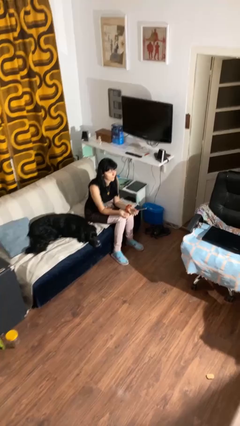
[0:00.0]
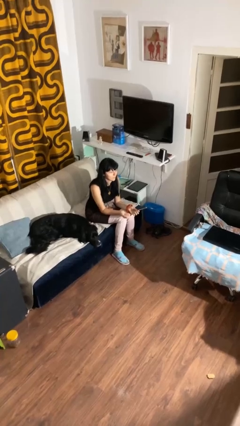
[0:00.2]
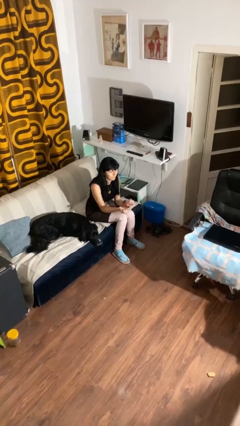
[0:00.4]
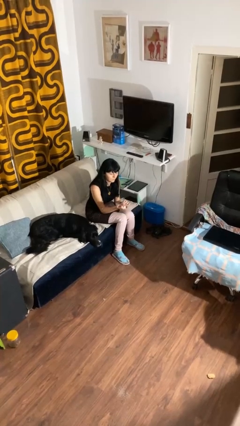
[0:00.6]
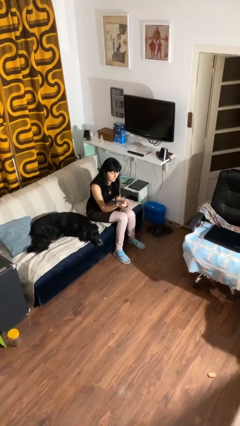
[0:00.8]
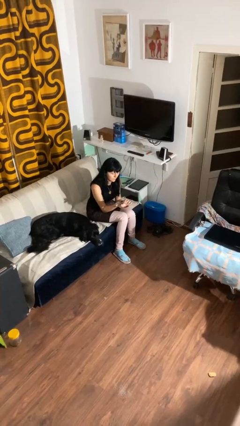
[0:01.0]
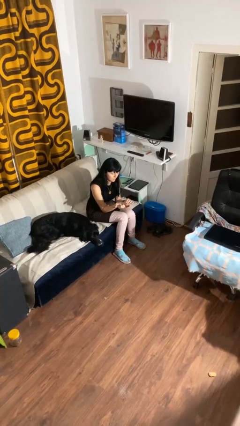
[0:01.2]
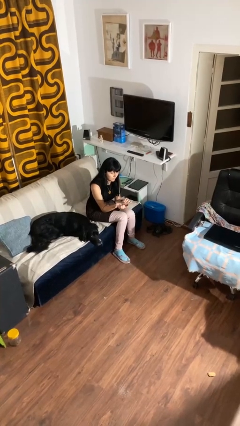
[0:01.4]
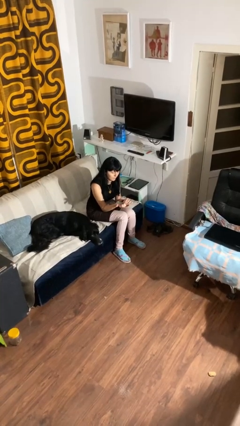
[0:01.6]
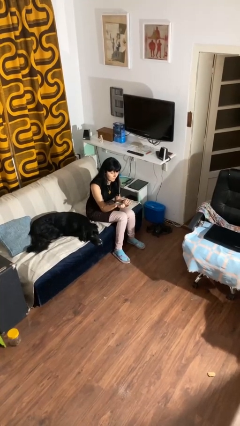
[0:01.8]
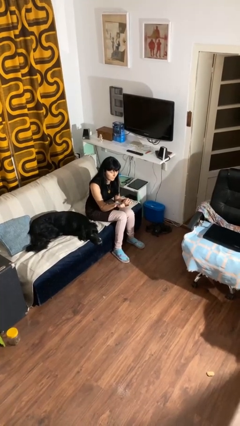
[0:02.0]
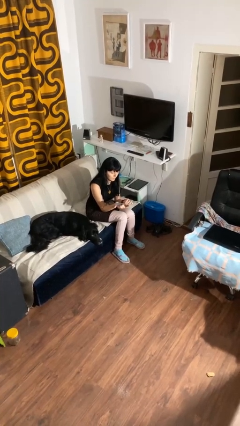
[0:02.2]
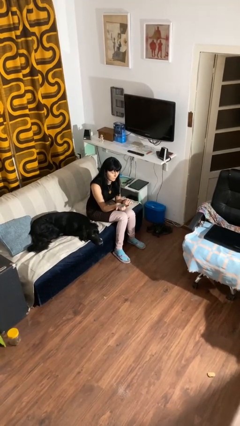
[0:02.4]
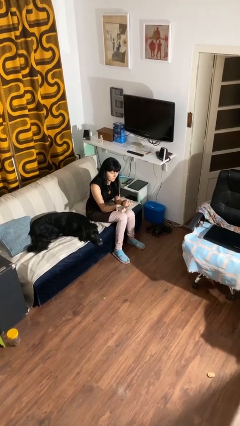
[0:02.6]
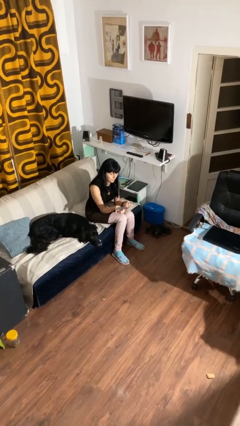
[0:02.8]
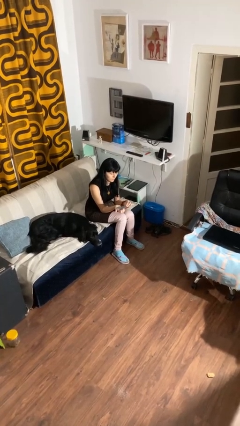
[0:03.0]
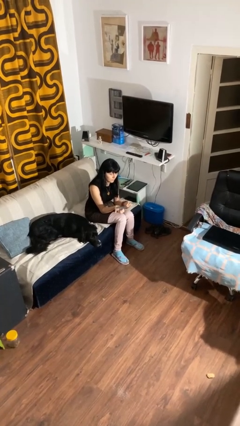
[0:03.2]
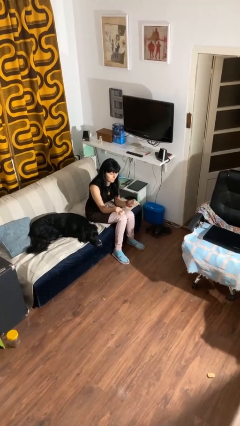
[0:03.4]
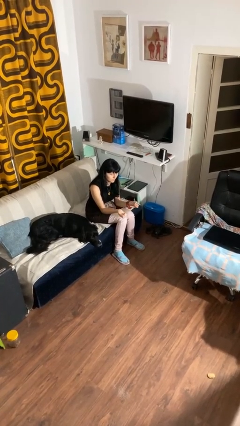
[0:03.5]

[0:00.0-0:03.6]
person files fingernails

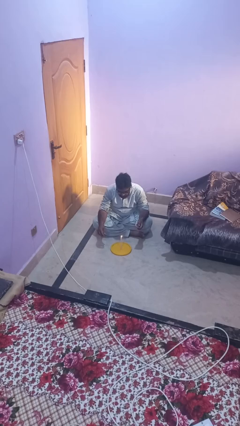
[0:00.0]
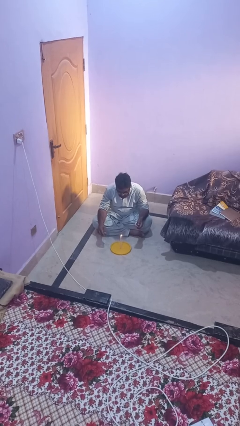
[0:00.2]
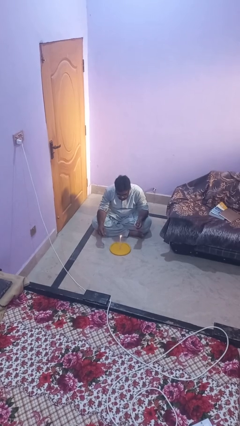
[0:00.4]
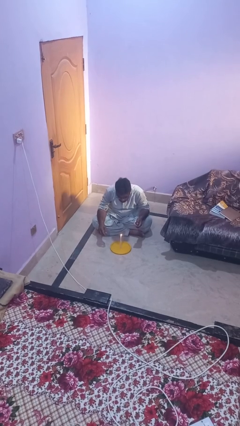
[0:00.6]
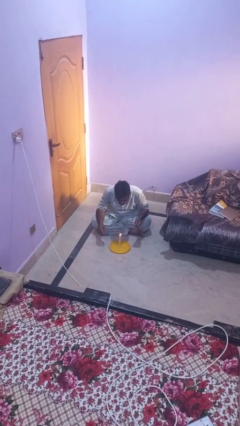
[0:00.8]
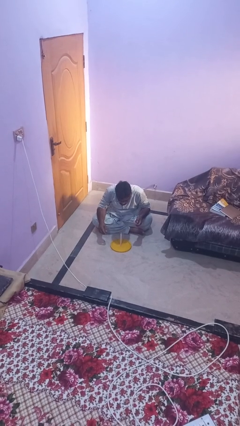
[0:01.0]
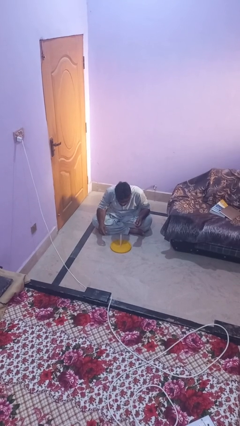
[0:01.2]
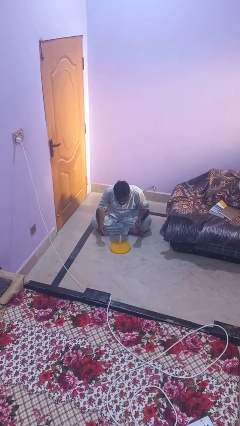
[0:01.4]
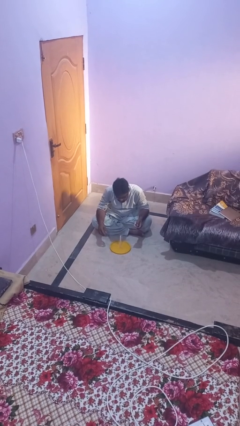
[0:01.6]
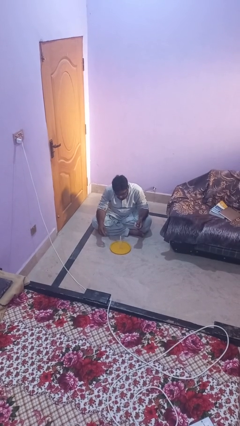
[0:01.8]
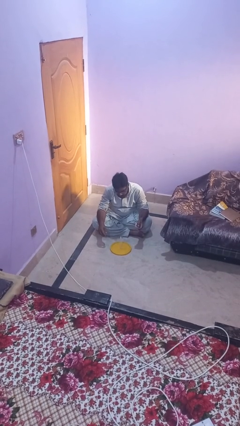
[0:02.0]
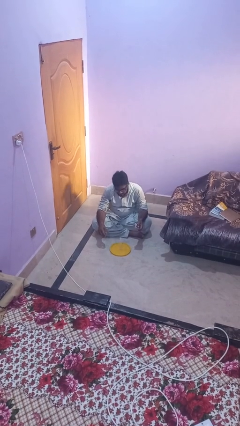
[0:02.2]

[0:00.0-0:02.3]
person extinguishes candle

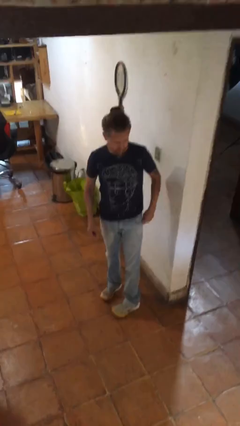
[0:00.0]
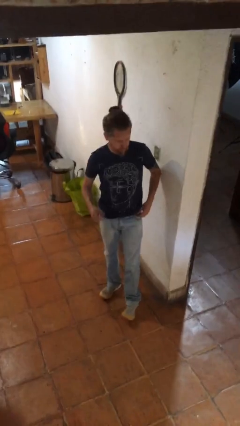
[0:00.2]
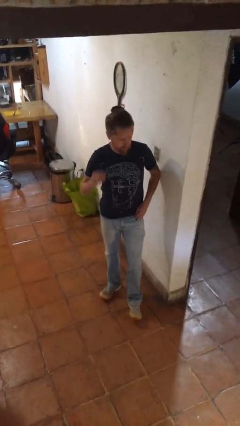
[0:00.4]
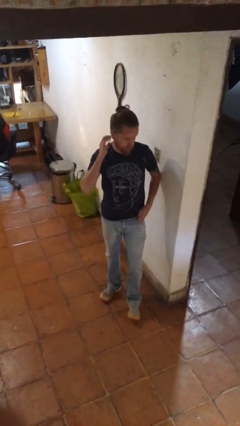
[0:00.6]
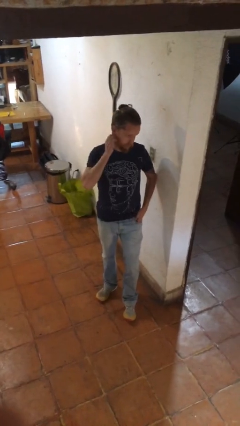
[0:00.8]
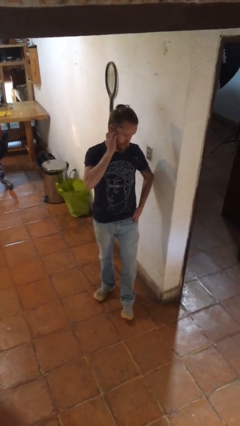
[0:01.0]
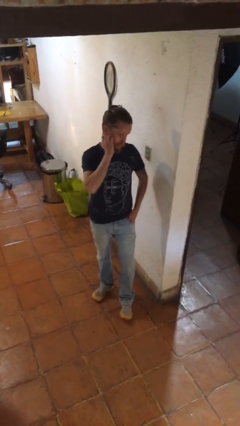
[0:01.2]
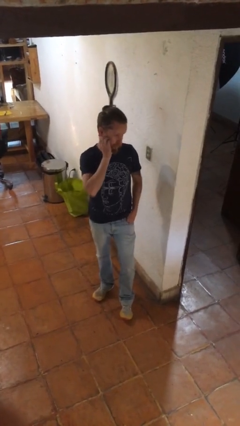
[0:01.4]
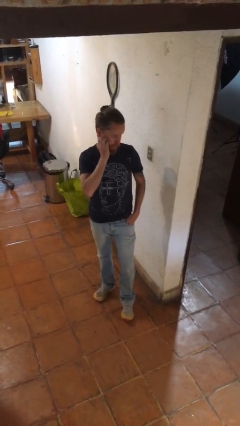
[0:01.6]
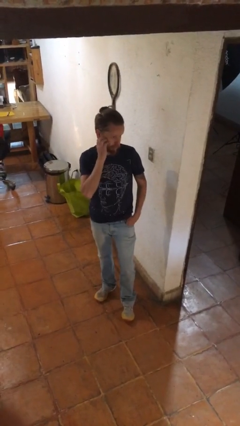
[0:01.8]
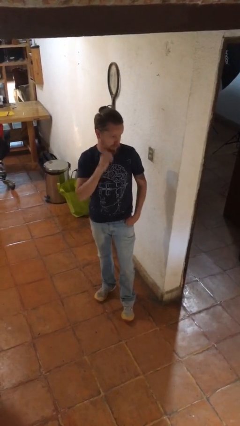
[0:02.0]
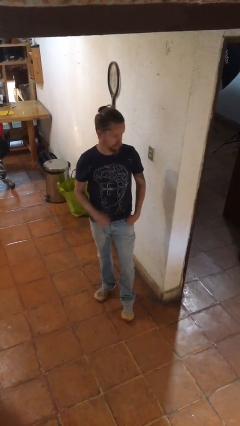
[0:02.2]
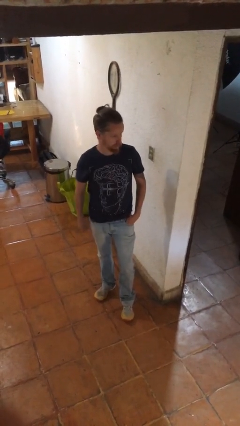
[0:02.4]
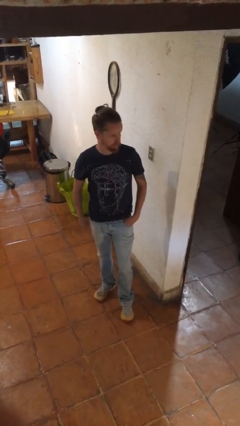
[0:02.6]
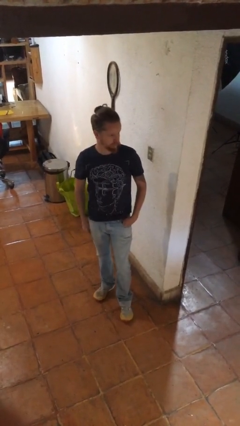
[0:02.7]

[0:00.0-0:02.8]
person scratches face

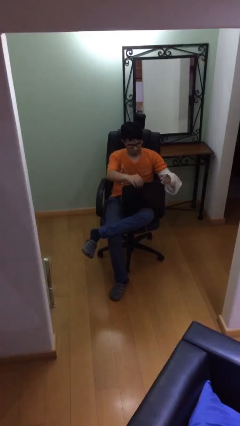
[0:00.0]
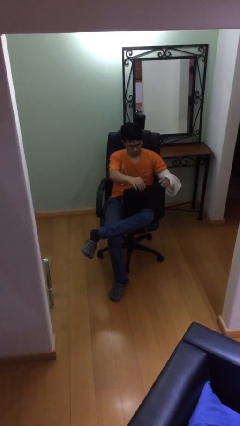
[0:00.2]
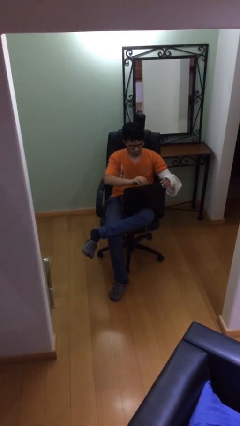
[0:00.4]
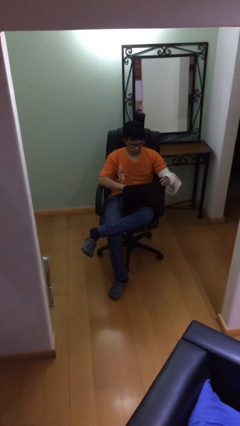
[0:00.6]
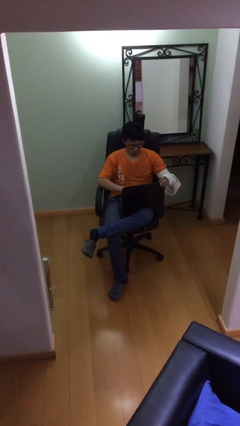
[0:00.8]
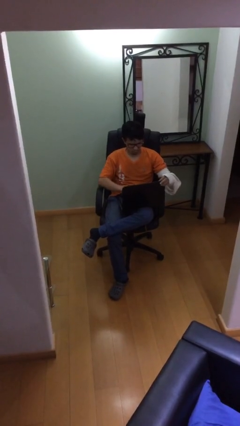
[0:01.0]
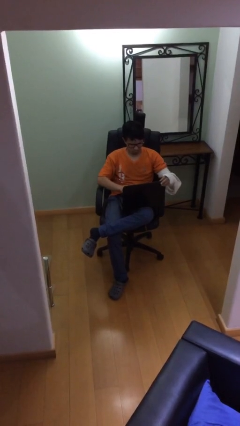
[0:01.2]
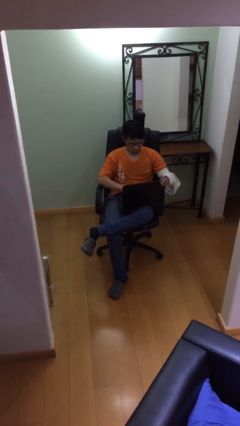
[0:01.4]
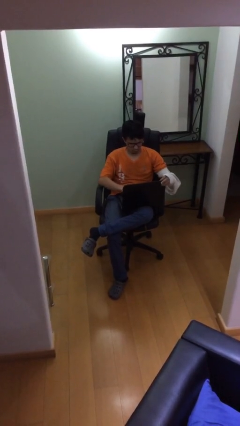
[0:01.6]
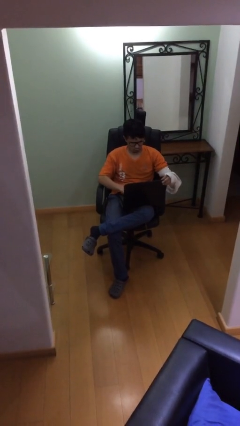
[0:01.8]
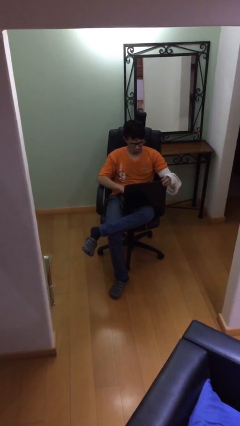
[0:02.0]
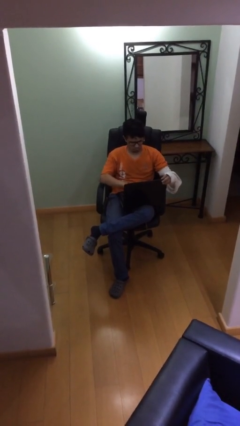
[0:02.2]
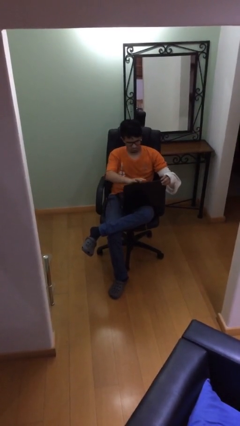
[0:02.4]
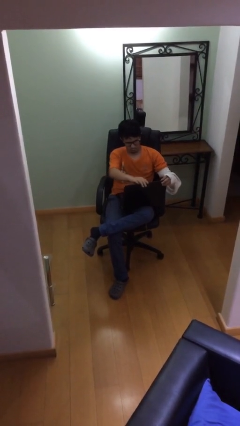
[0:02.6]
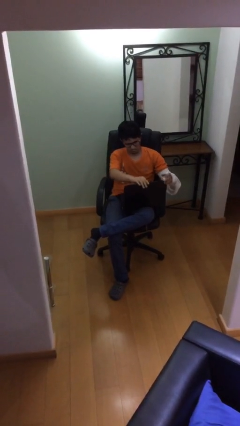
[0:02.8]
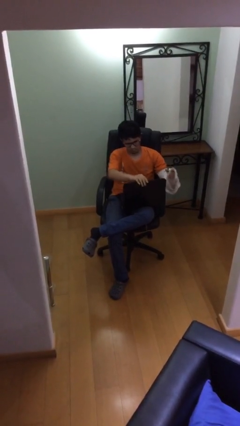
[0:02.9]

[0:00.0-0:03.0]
person interacts with laptop

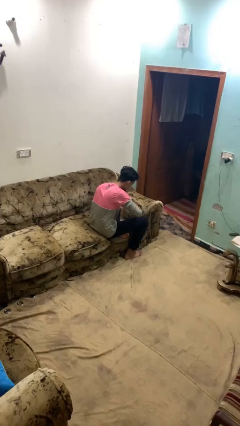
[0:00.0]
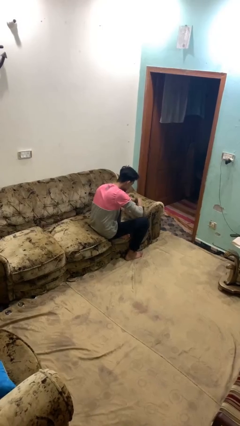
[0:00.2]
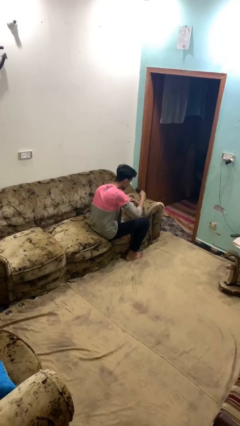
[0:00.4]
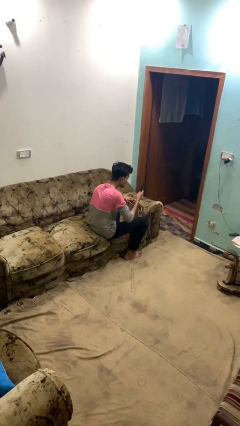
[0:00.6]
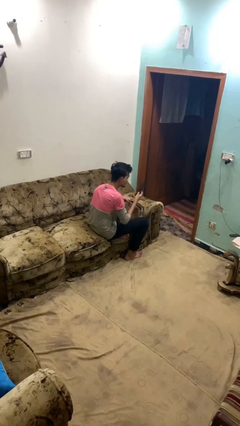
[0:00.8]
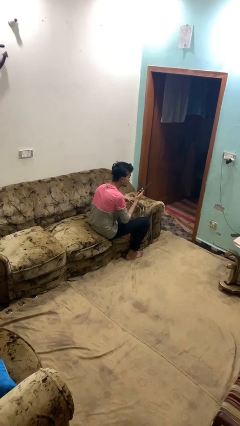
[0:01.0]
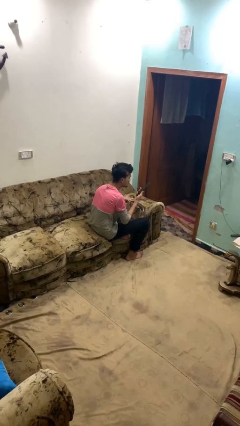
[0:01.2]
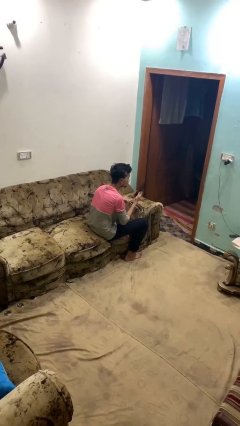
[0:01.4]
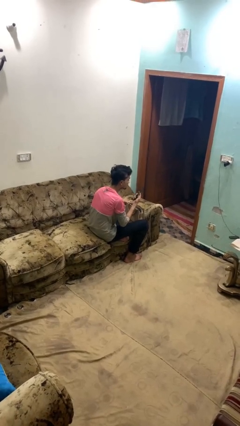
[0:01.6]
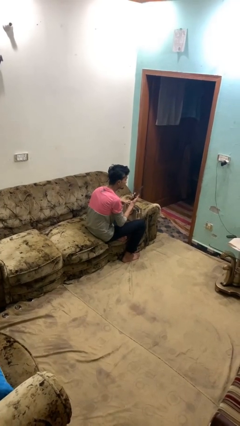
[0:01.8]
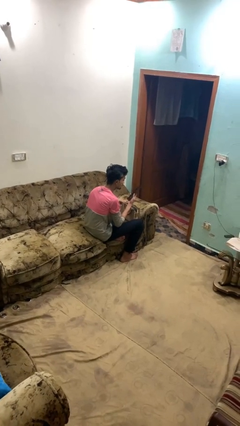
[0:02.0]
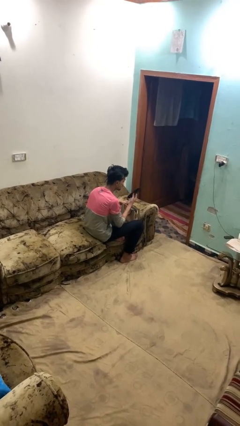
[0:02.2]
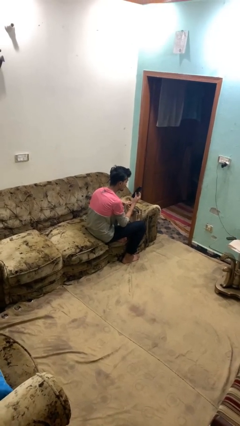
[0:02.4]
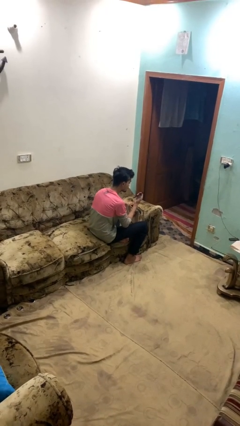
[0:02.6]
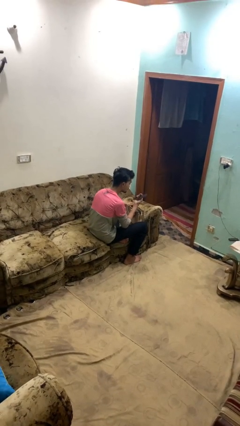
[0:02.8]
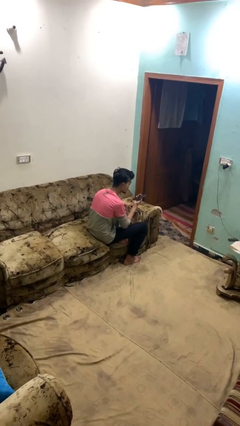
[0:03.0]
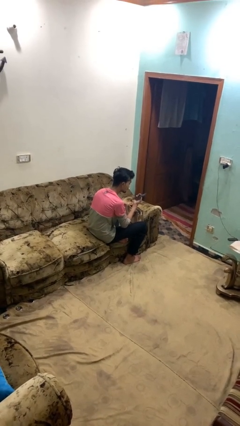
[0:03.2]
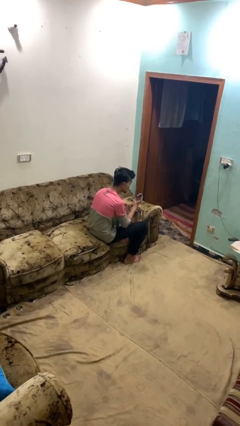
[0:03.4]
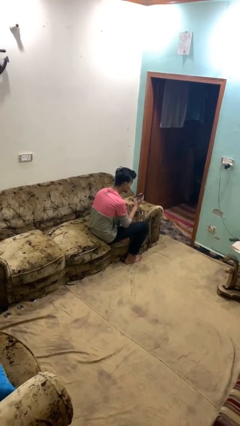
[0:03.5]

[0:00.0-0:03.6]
person takes object from purse

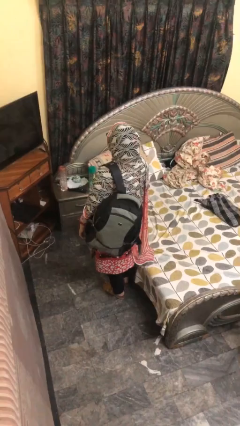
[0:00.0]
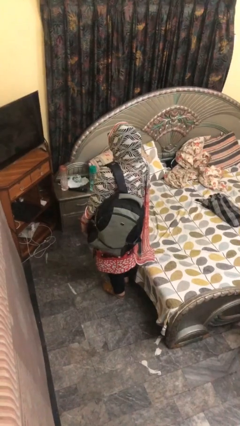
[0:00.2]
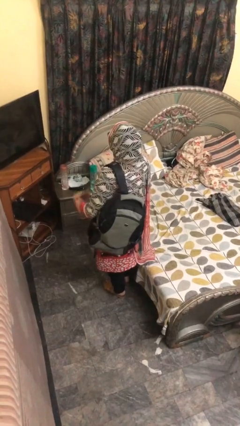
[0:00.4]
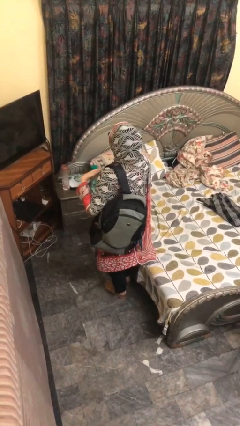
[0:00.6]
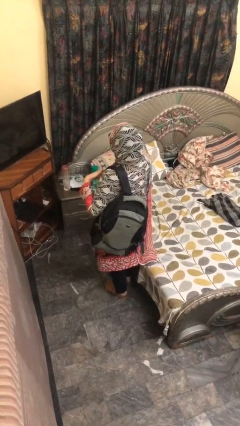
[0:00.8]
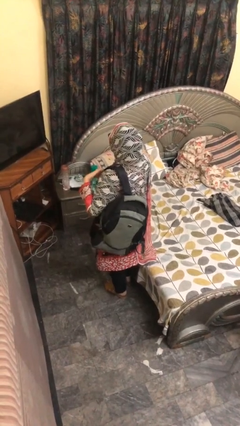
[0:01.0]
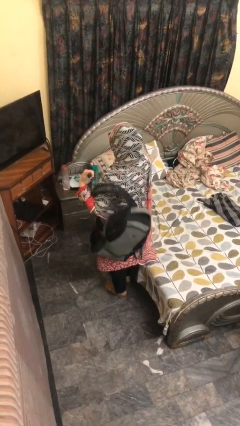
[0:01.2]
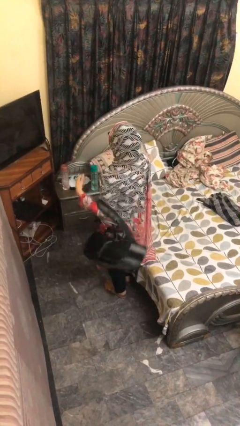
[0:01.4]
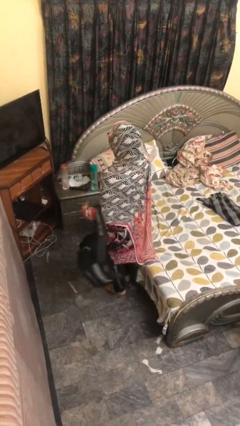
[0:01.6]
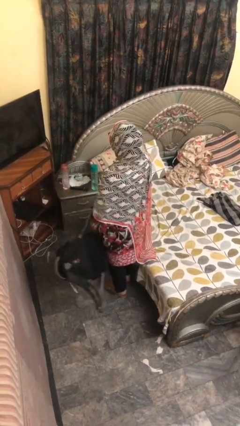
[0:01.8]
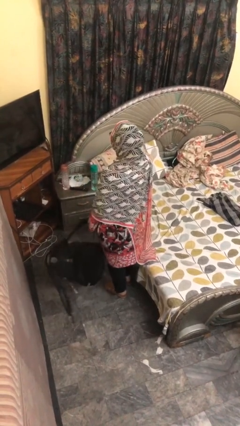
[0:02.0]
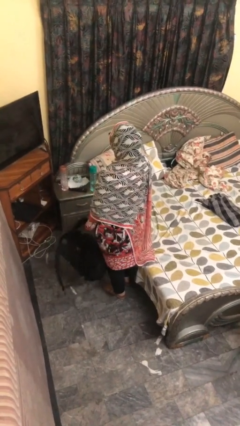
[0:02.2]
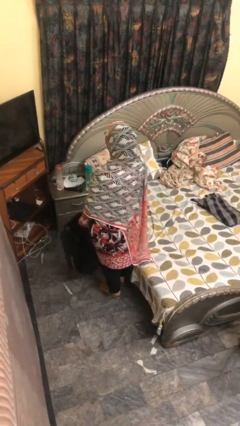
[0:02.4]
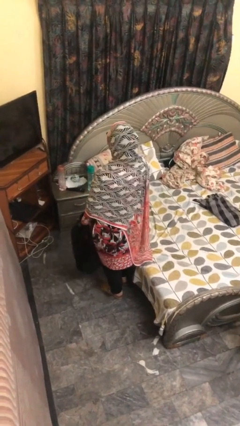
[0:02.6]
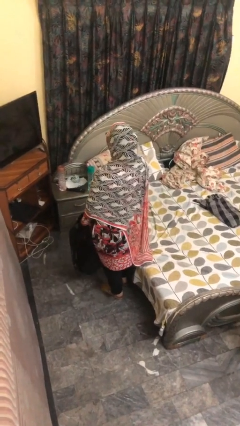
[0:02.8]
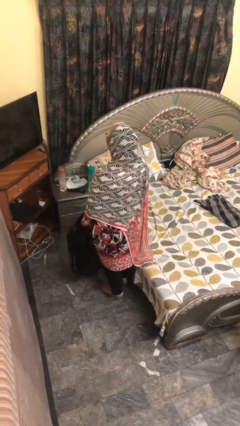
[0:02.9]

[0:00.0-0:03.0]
person takes off backpack
